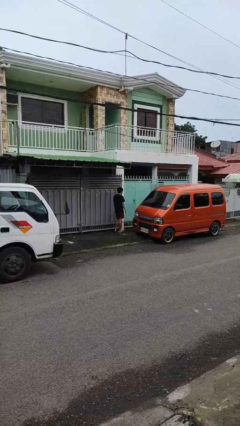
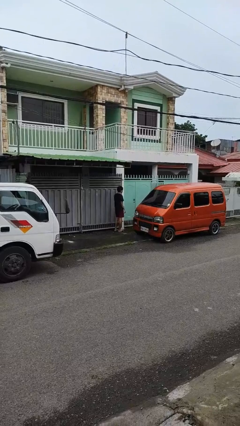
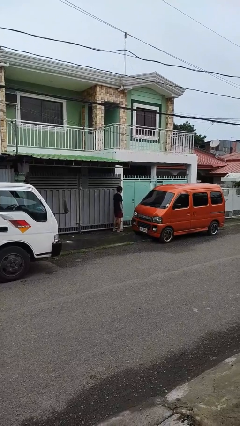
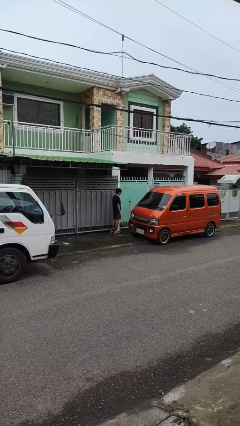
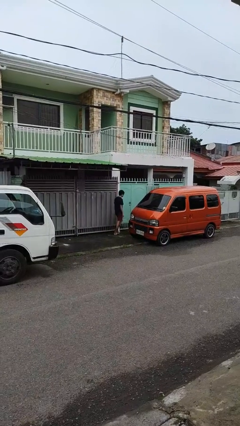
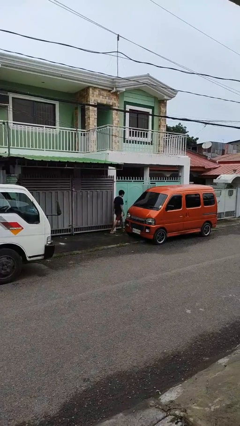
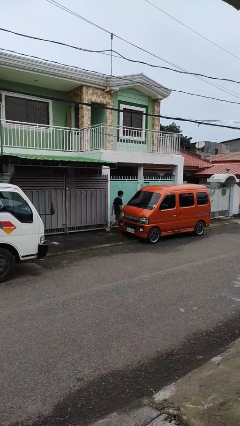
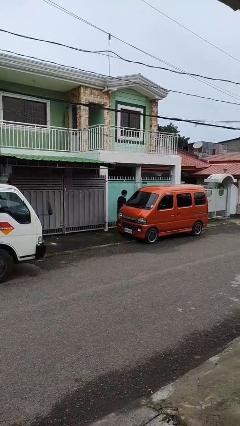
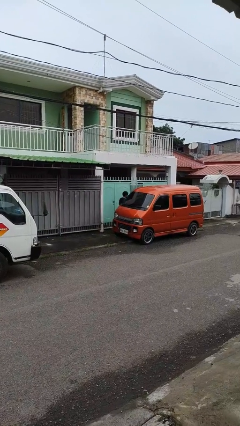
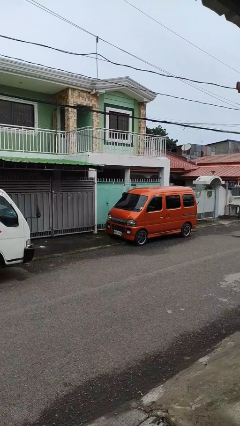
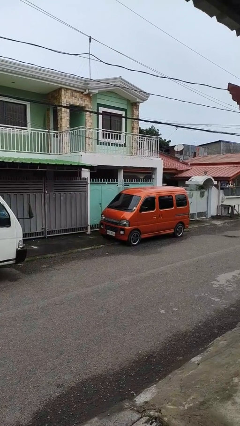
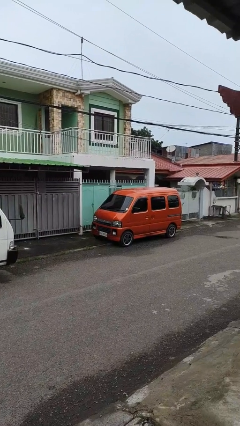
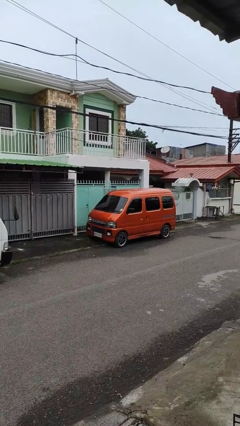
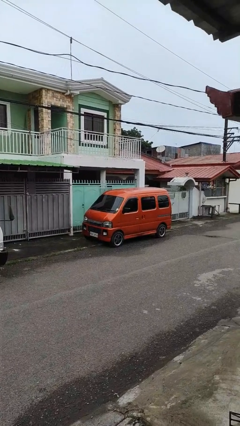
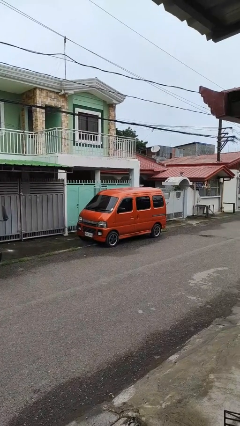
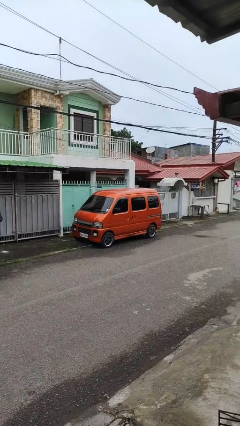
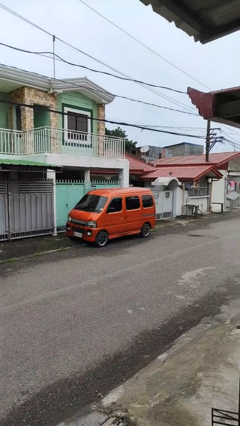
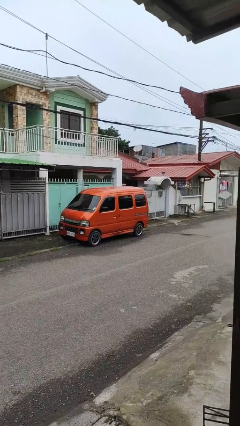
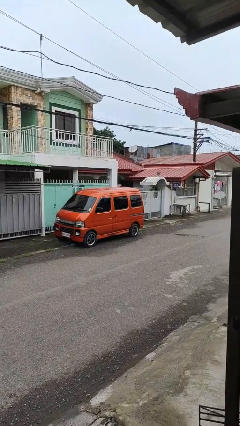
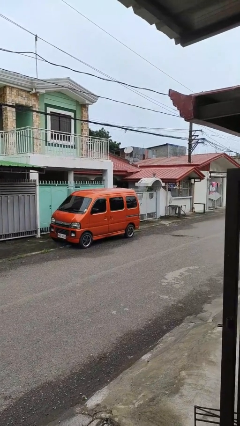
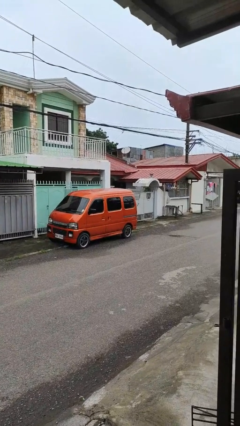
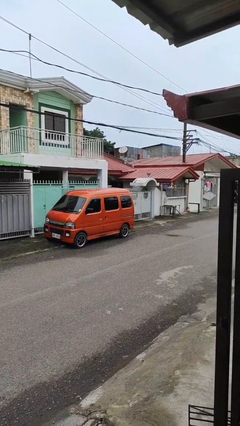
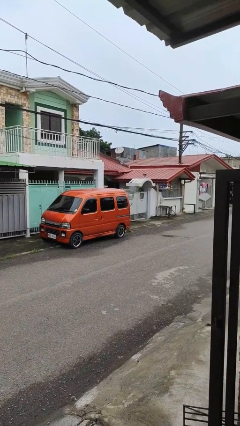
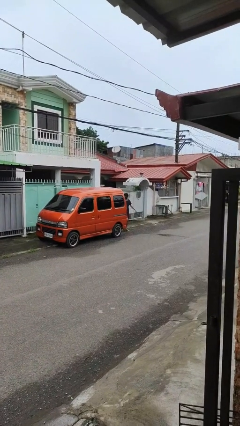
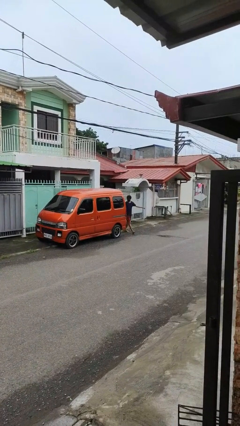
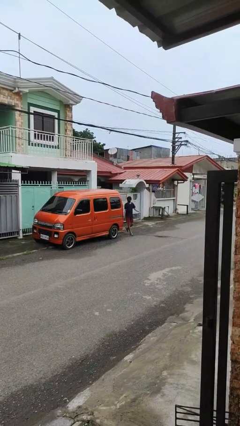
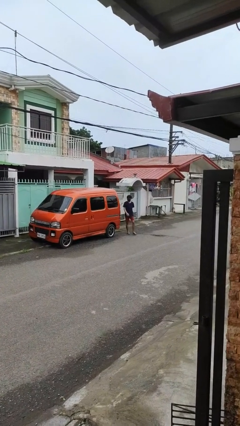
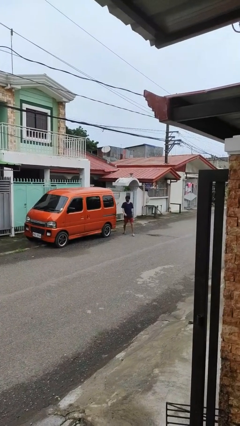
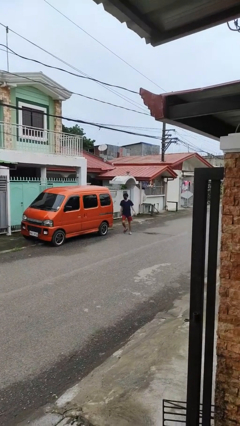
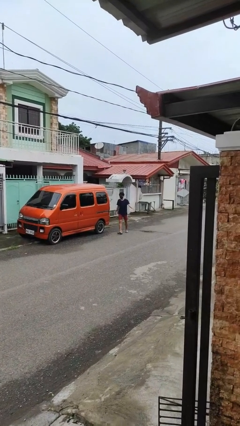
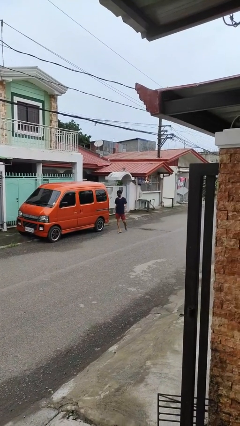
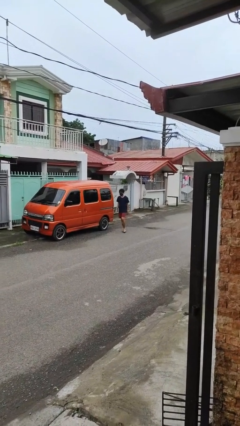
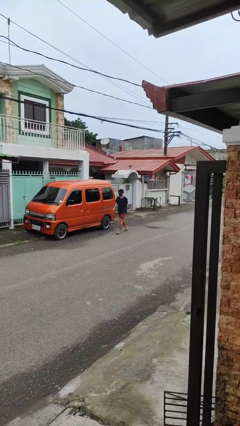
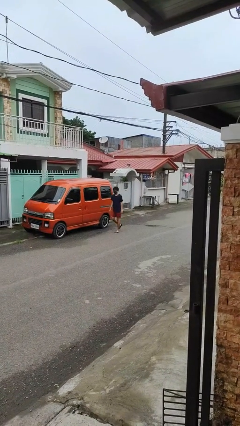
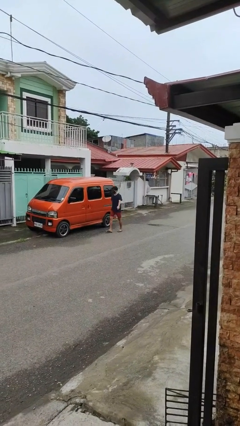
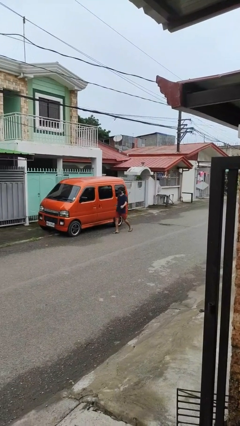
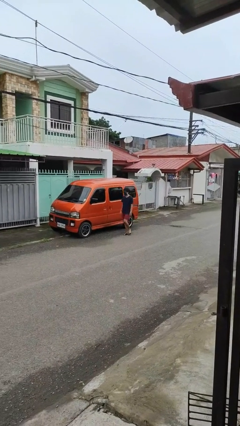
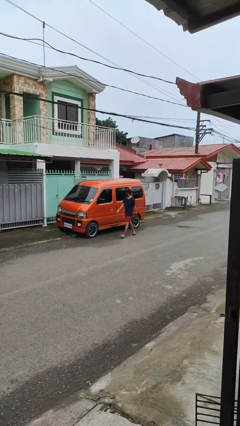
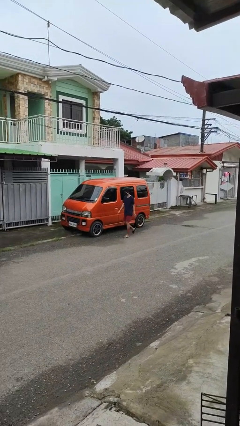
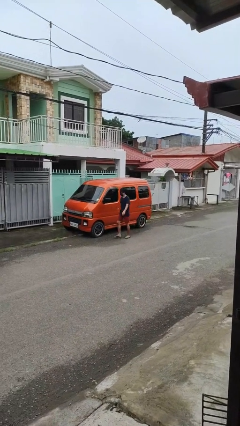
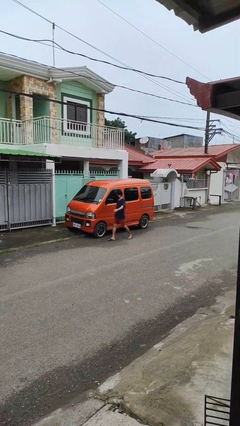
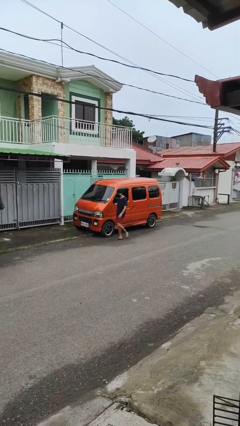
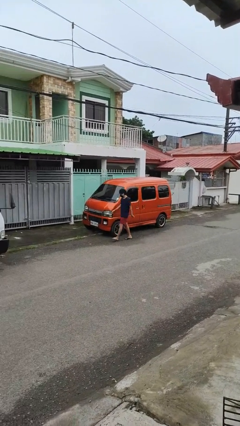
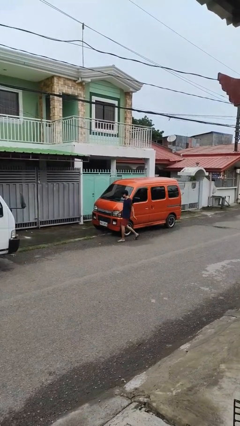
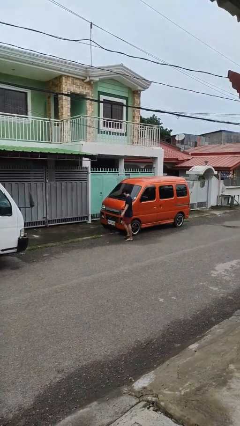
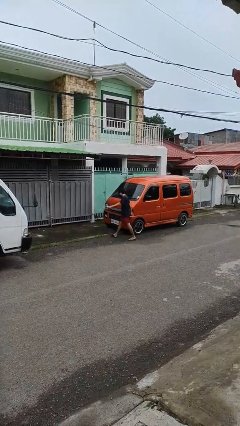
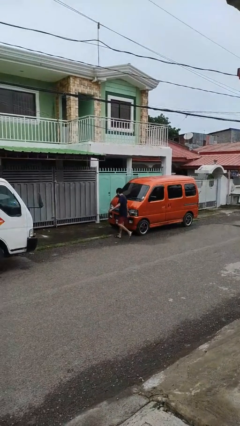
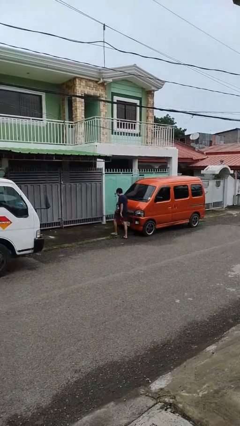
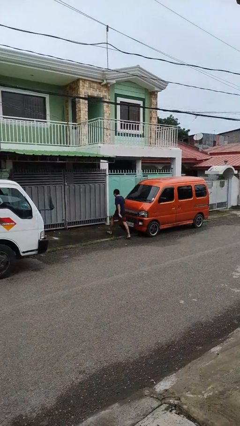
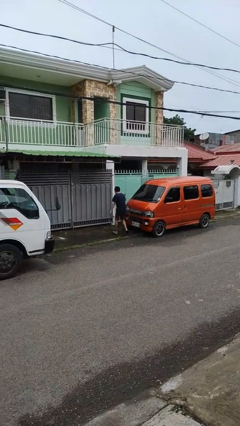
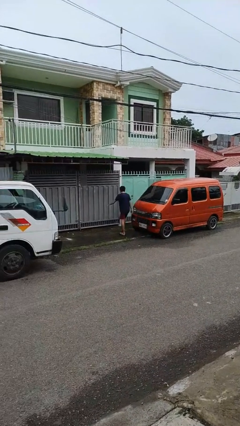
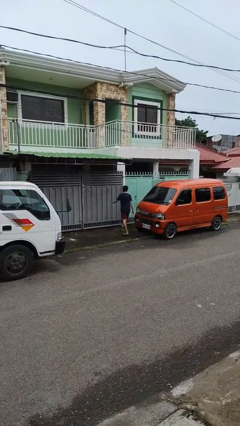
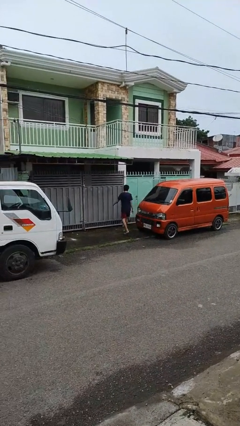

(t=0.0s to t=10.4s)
person walks around car

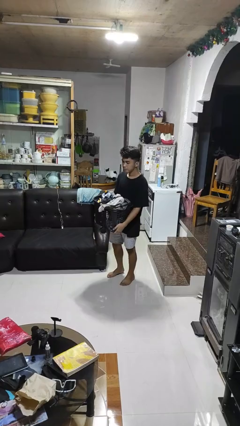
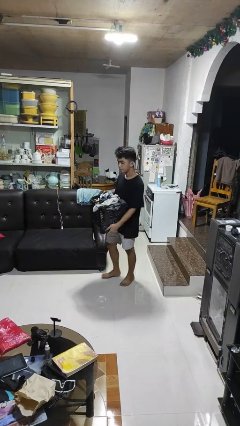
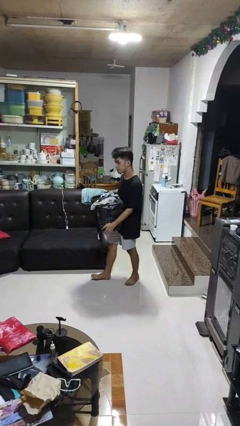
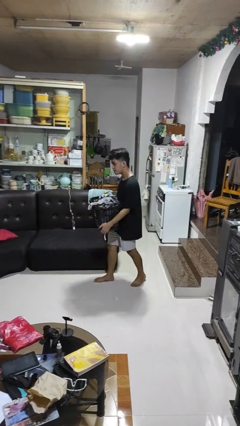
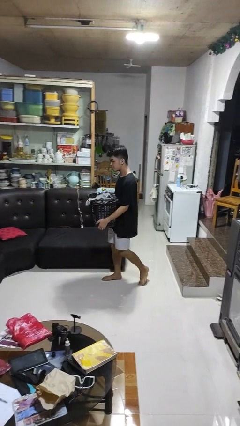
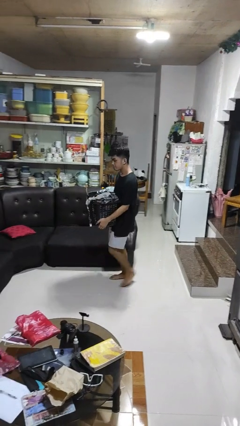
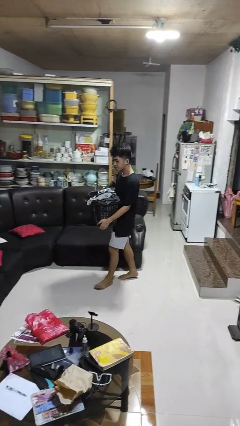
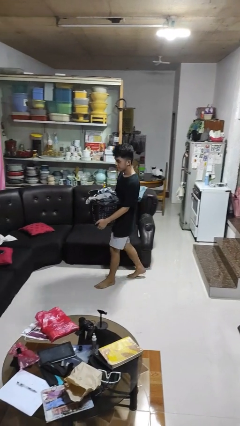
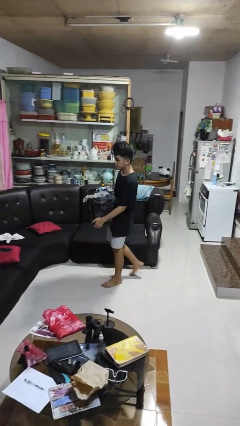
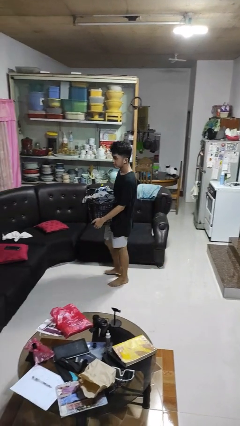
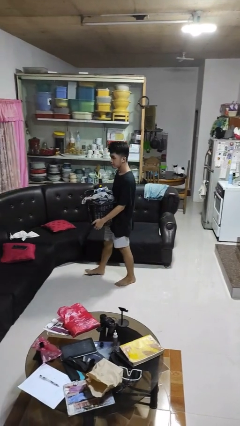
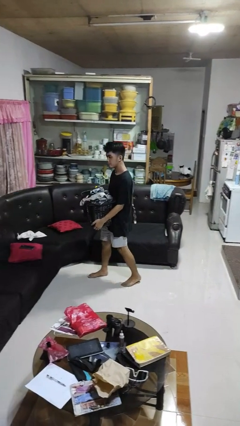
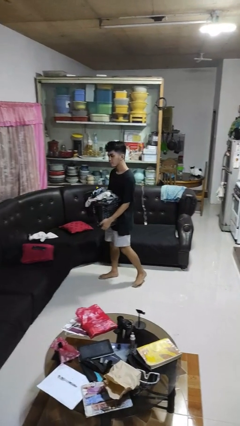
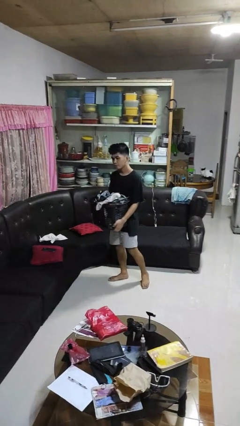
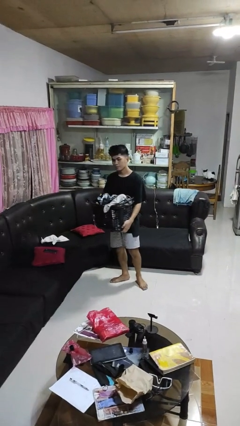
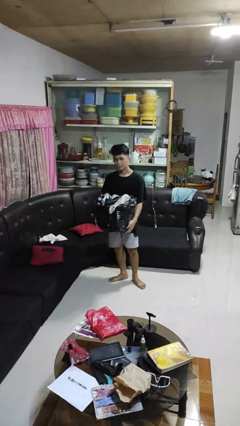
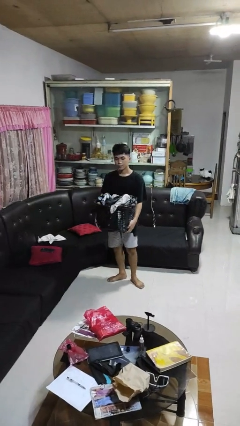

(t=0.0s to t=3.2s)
person carries laundry basket

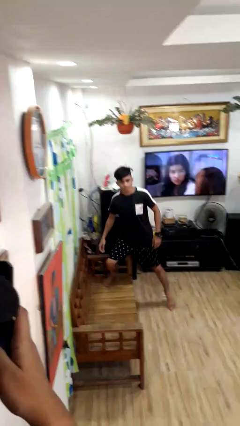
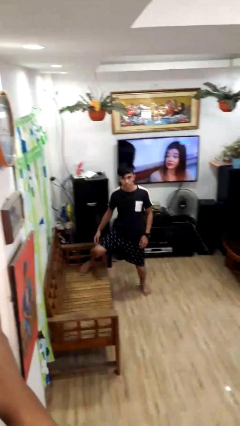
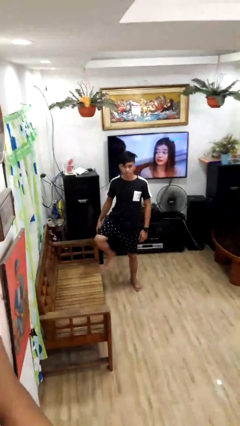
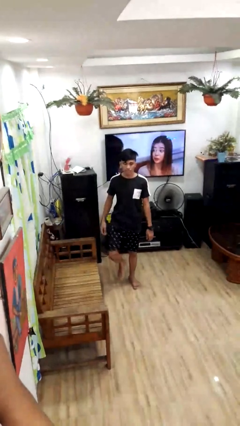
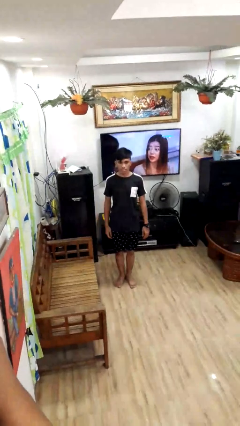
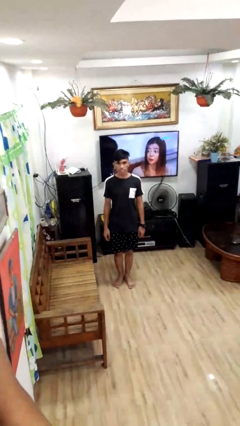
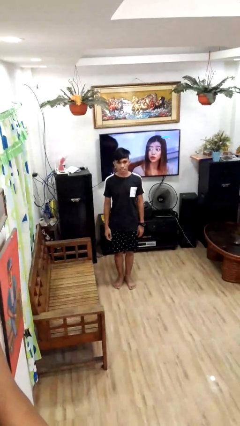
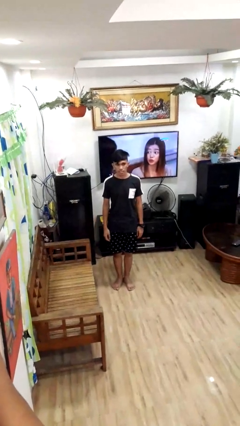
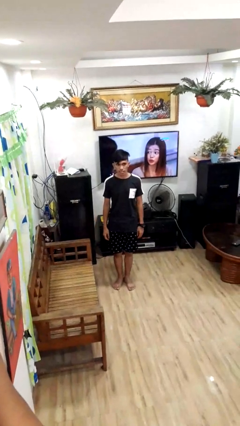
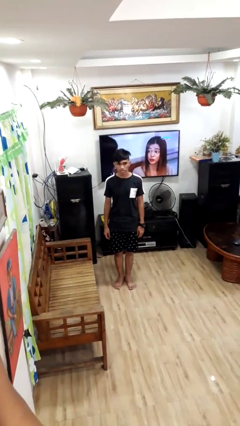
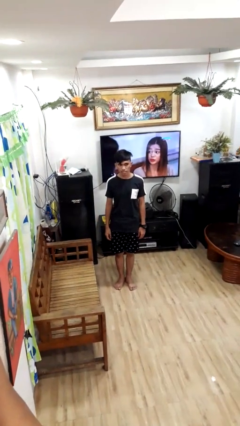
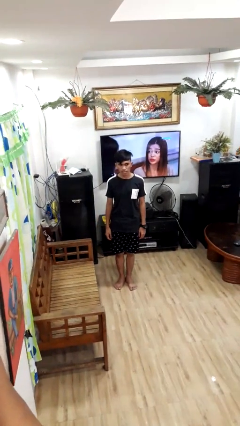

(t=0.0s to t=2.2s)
person climbs off couch

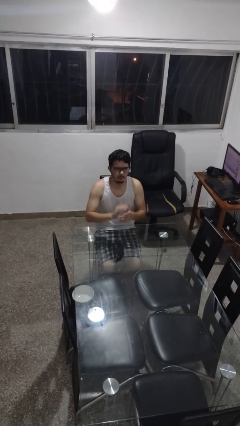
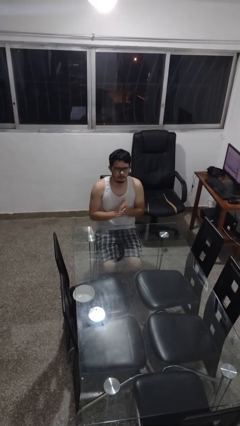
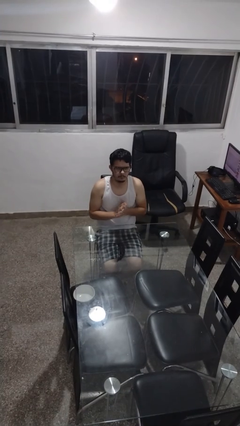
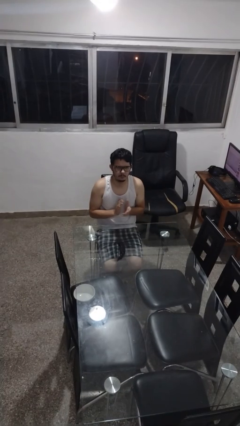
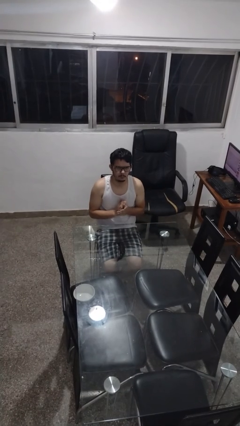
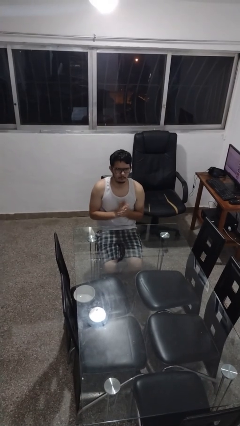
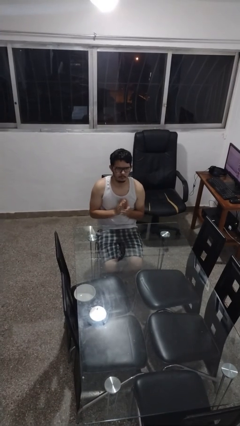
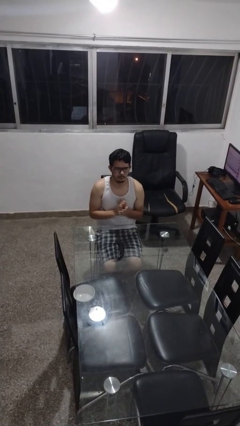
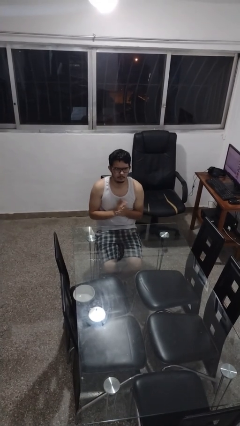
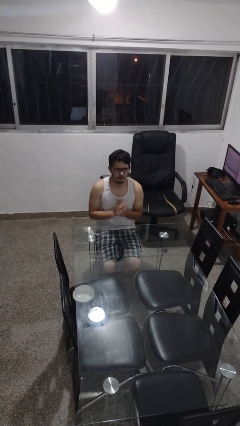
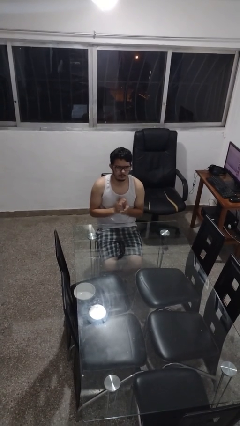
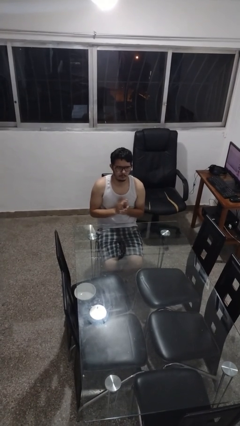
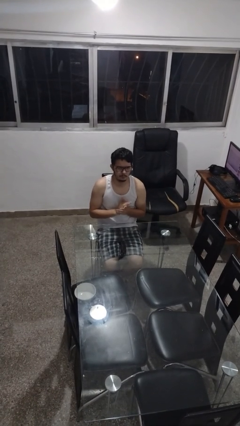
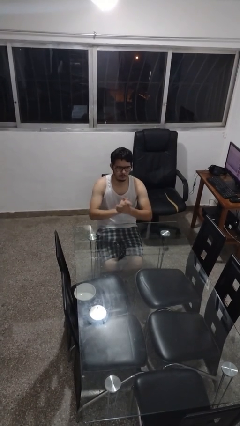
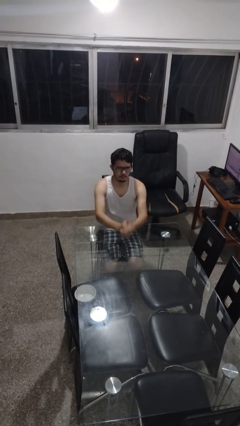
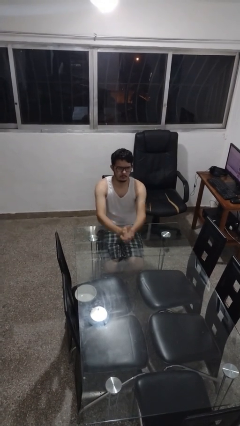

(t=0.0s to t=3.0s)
person claps hands
